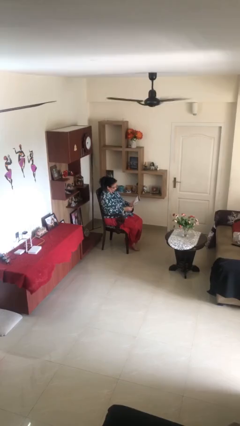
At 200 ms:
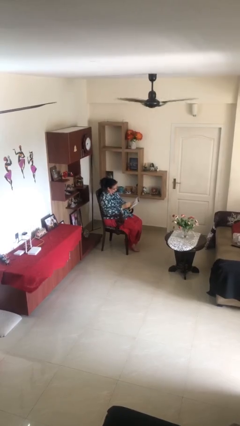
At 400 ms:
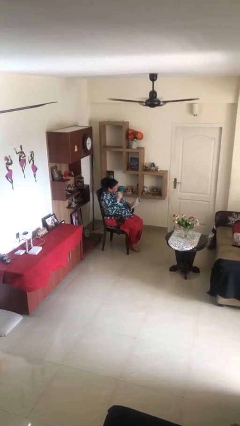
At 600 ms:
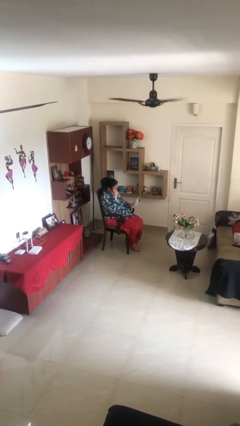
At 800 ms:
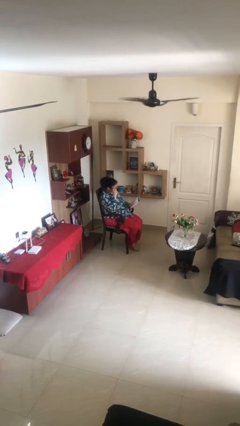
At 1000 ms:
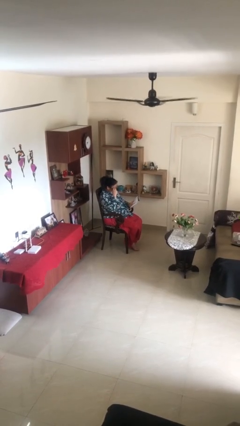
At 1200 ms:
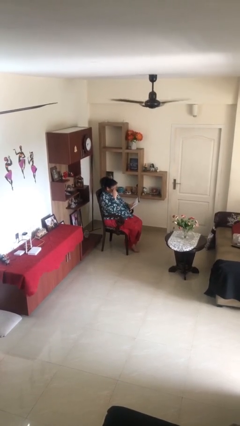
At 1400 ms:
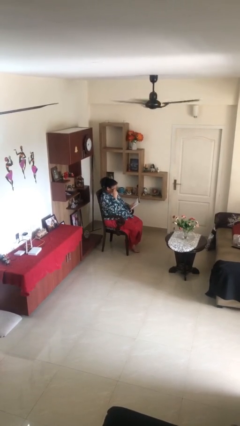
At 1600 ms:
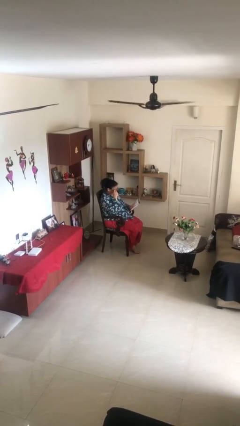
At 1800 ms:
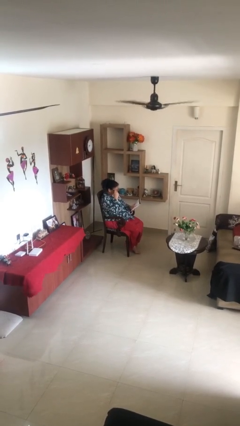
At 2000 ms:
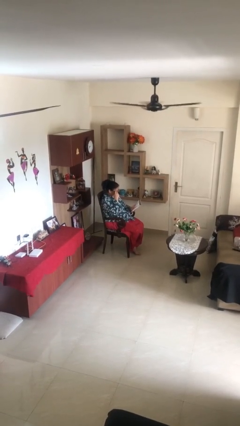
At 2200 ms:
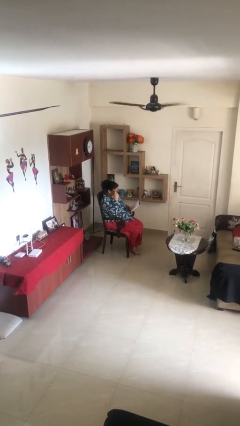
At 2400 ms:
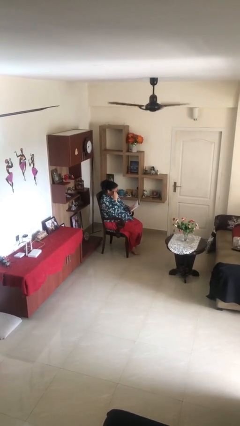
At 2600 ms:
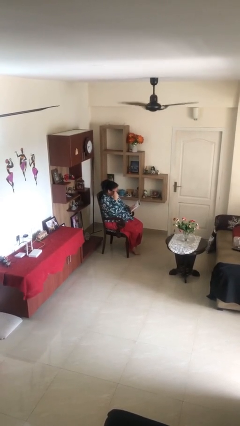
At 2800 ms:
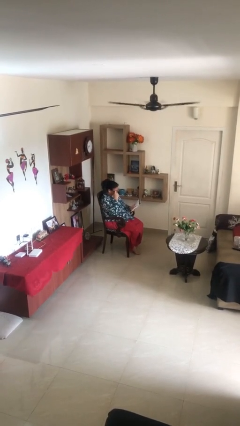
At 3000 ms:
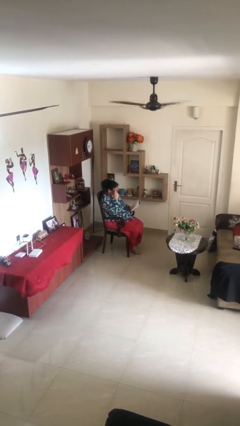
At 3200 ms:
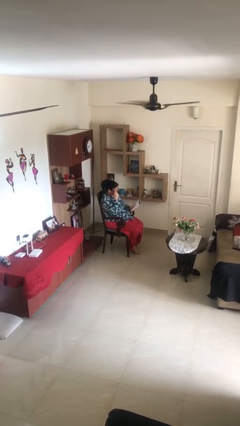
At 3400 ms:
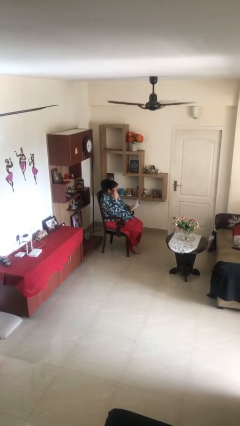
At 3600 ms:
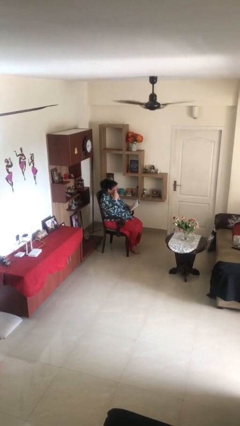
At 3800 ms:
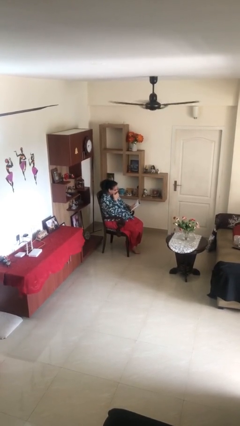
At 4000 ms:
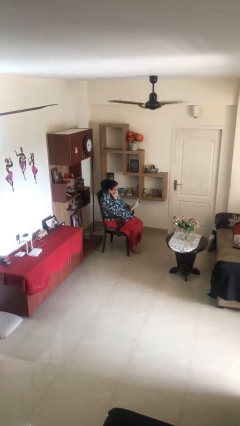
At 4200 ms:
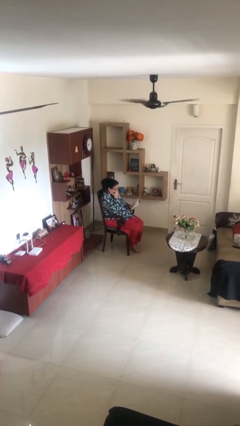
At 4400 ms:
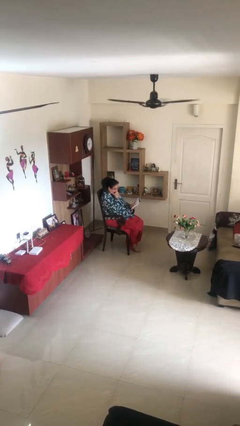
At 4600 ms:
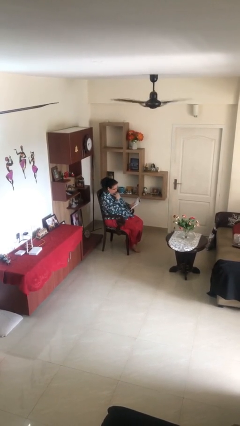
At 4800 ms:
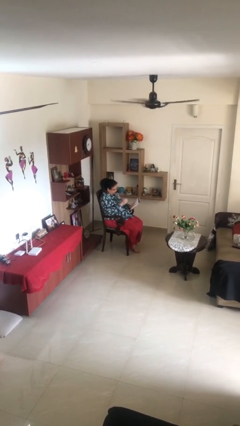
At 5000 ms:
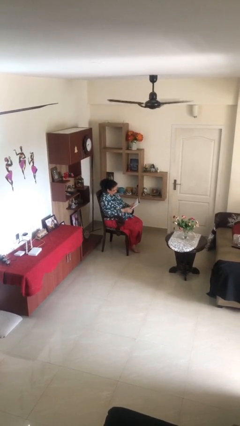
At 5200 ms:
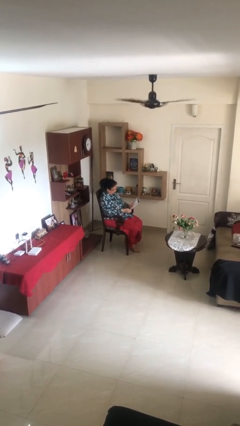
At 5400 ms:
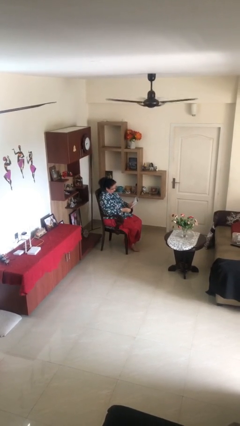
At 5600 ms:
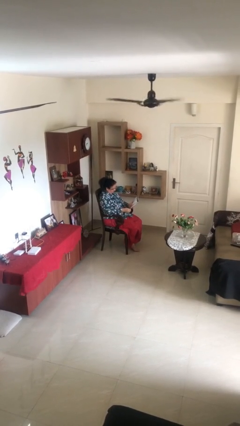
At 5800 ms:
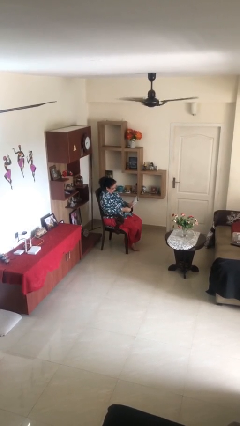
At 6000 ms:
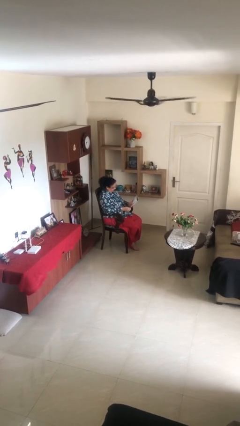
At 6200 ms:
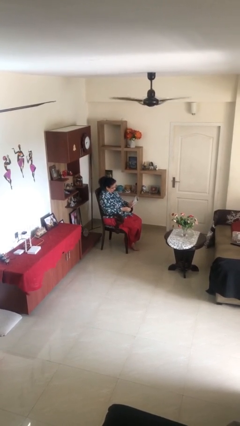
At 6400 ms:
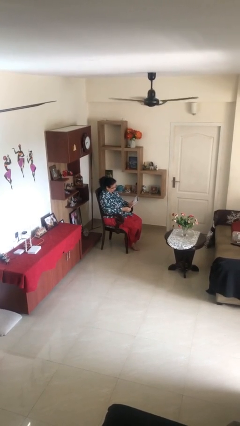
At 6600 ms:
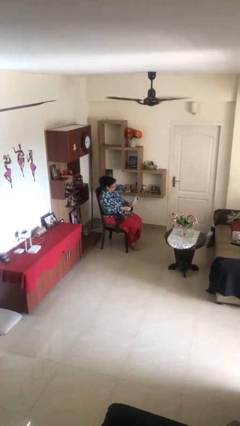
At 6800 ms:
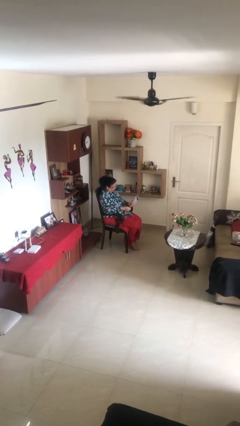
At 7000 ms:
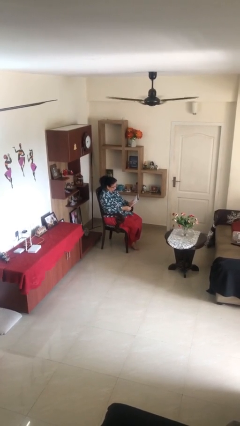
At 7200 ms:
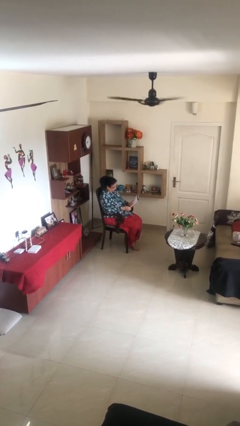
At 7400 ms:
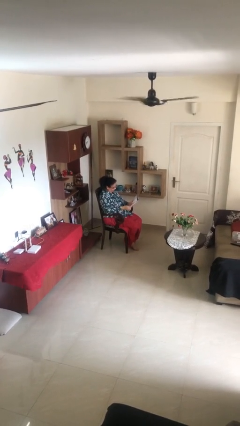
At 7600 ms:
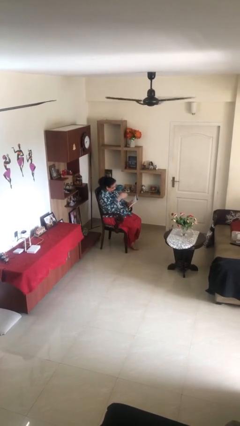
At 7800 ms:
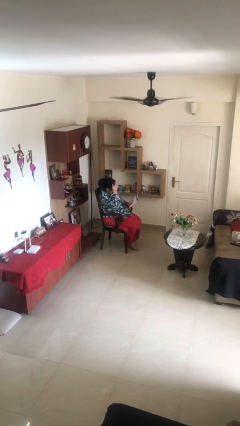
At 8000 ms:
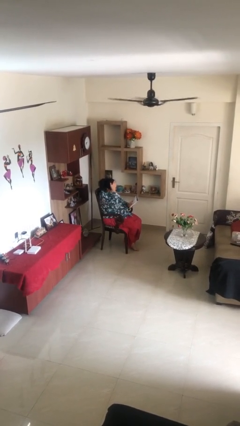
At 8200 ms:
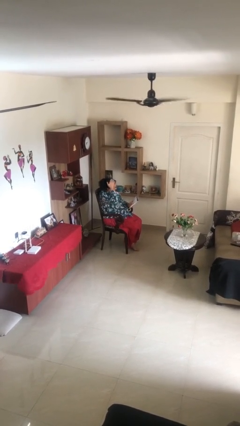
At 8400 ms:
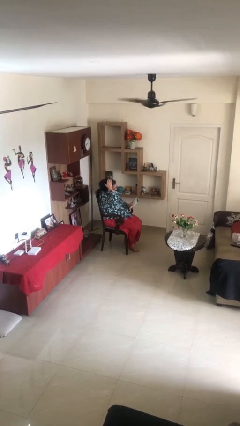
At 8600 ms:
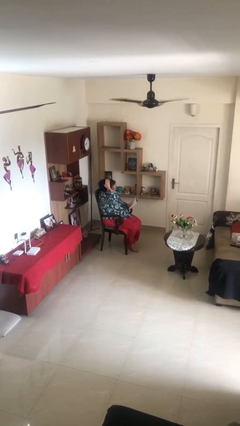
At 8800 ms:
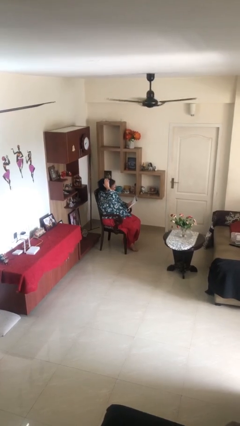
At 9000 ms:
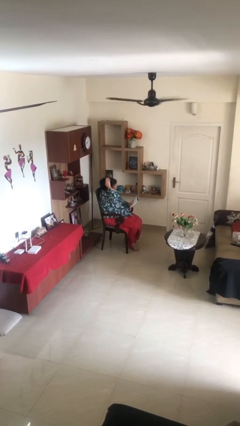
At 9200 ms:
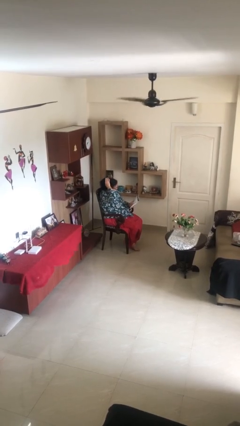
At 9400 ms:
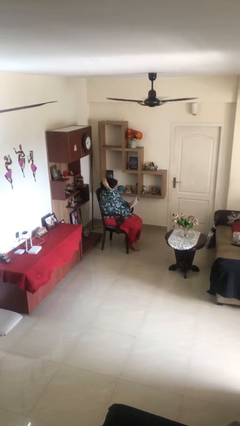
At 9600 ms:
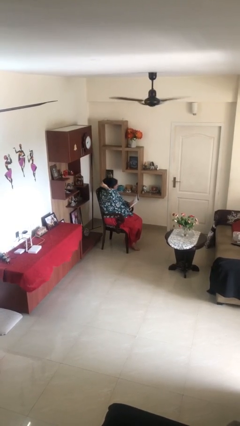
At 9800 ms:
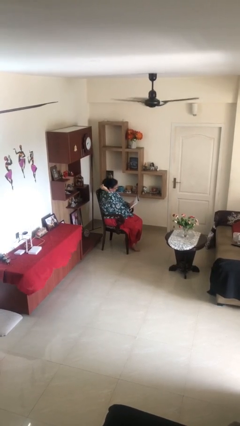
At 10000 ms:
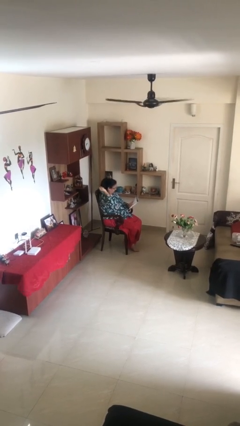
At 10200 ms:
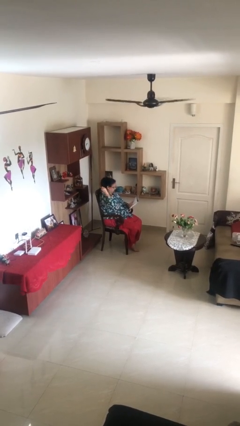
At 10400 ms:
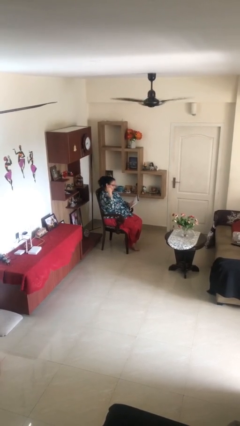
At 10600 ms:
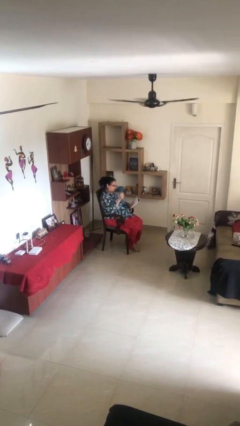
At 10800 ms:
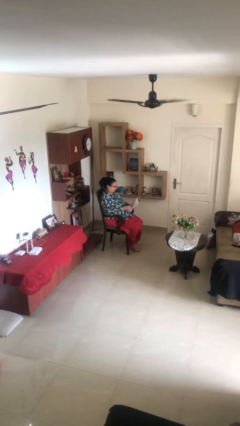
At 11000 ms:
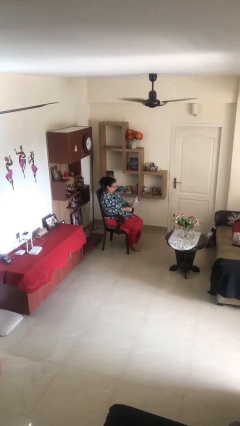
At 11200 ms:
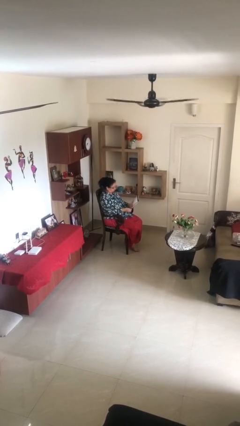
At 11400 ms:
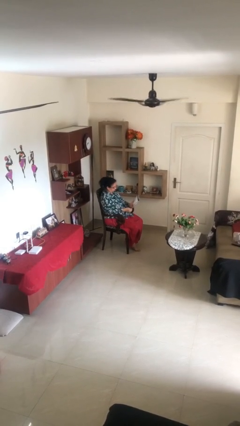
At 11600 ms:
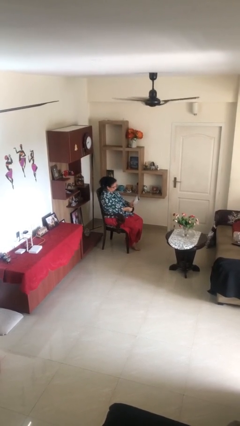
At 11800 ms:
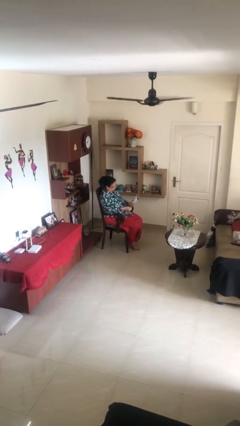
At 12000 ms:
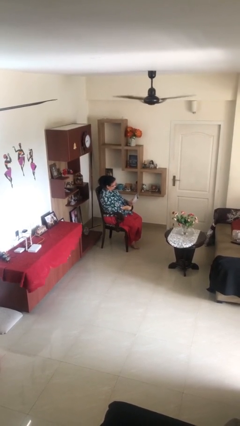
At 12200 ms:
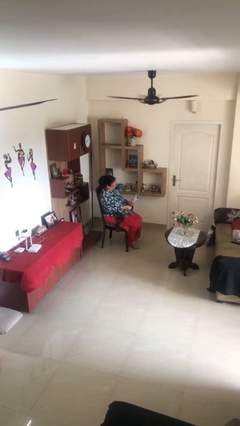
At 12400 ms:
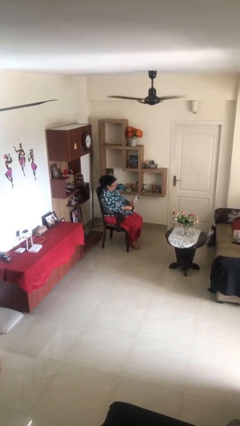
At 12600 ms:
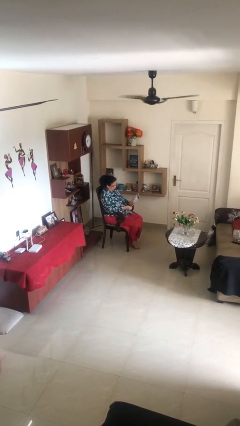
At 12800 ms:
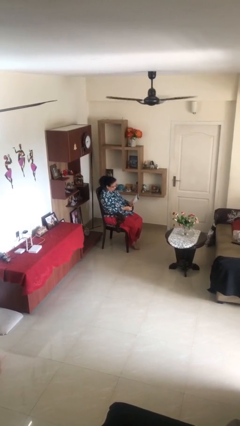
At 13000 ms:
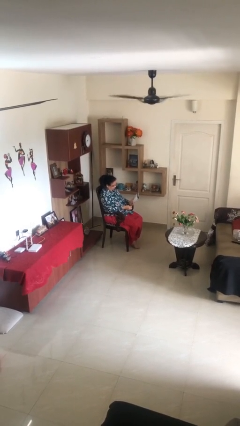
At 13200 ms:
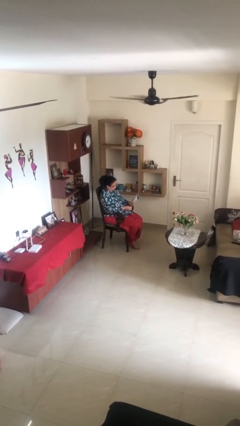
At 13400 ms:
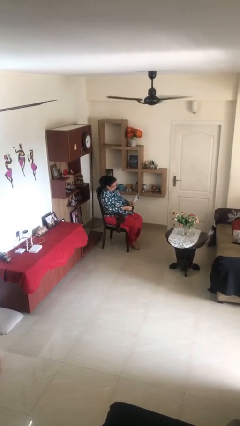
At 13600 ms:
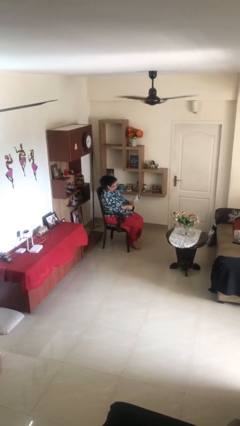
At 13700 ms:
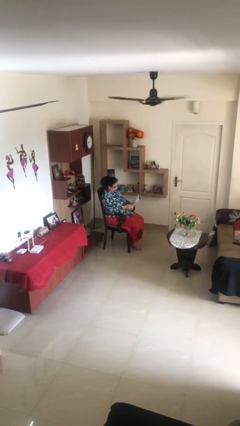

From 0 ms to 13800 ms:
person reads document

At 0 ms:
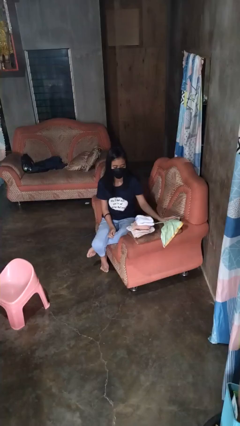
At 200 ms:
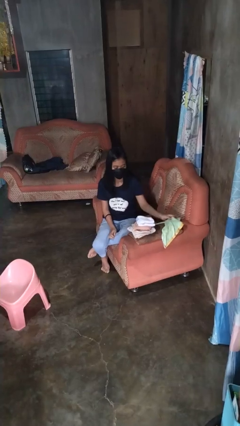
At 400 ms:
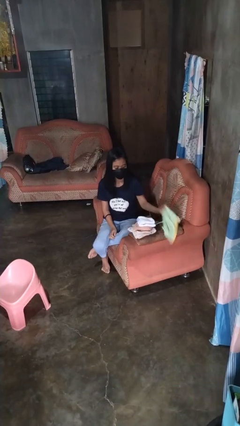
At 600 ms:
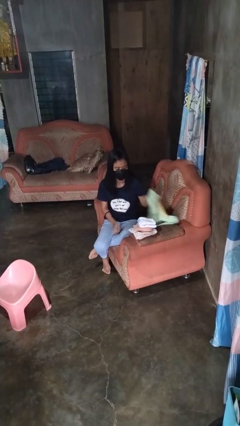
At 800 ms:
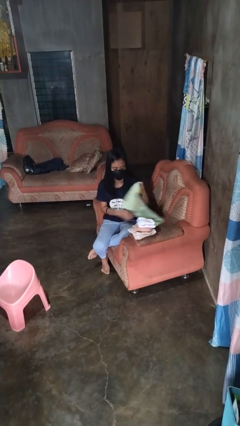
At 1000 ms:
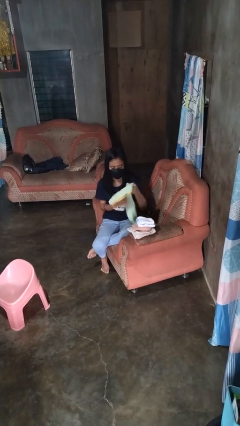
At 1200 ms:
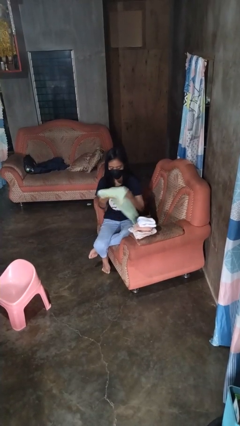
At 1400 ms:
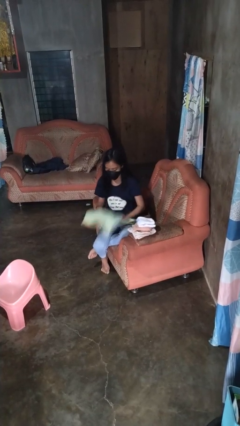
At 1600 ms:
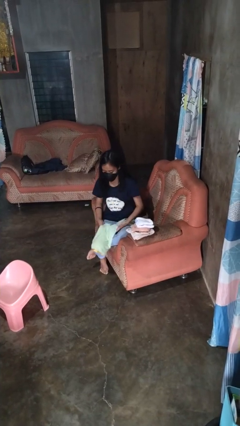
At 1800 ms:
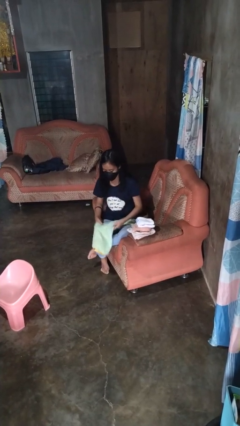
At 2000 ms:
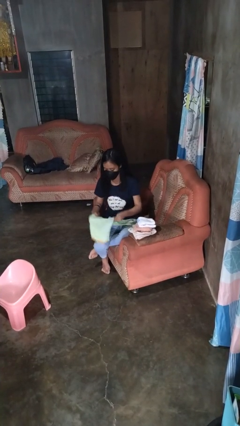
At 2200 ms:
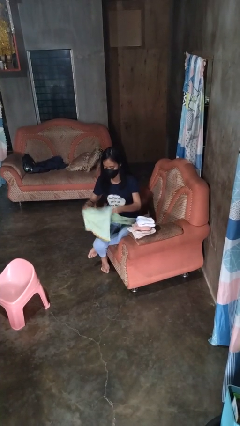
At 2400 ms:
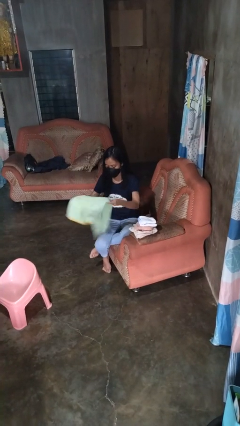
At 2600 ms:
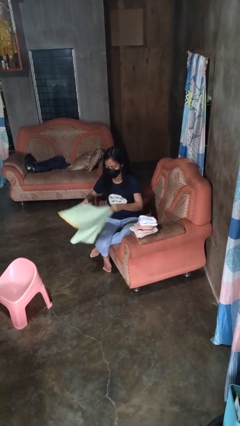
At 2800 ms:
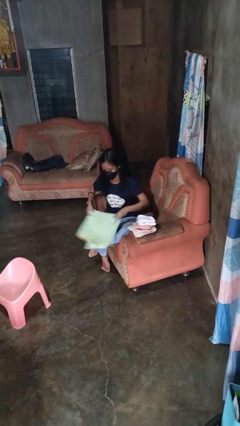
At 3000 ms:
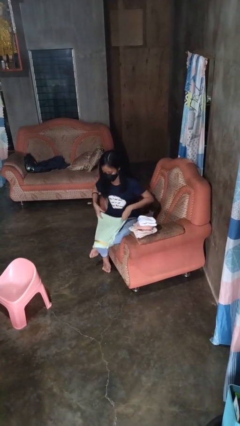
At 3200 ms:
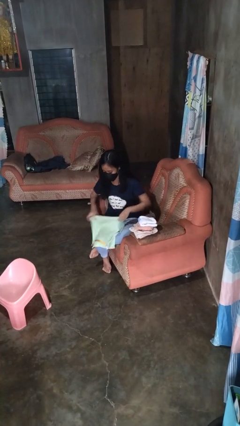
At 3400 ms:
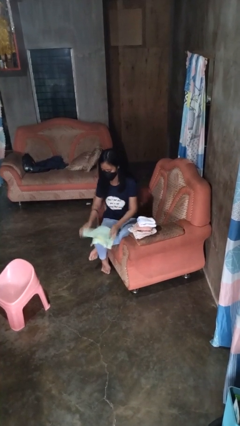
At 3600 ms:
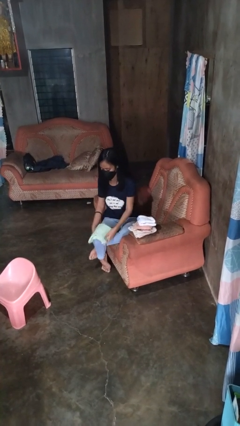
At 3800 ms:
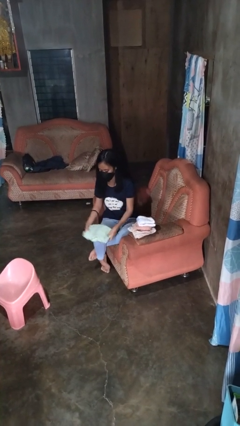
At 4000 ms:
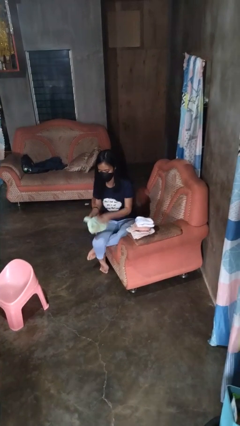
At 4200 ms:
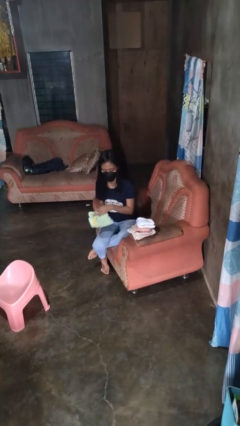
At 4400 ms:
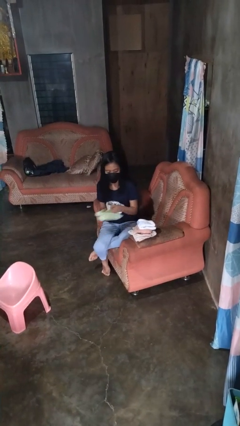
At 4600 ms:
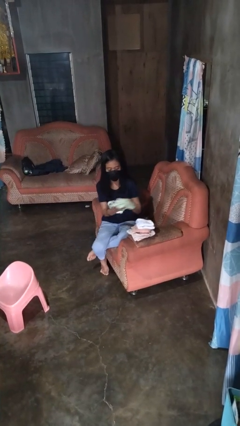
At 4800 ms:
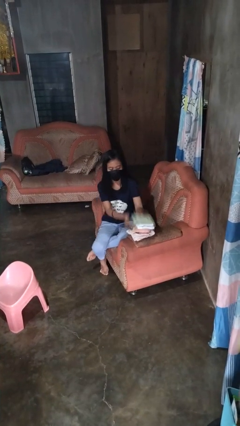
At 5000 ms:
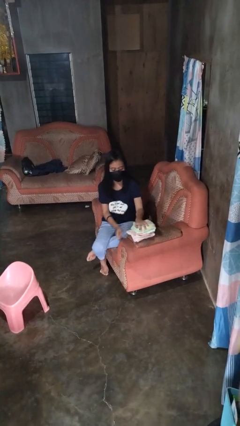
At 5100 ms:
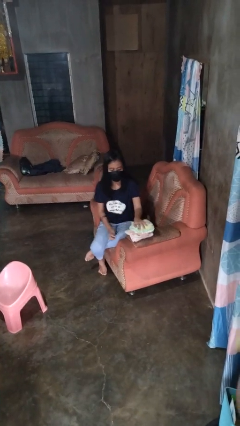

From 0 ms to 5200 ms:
person folds towel
